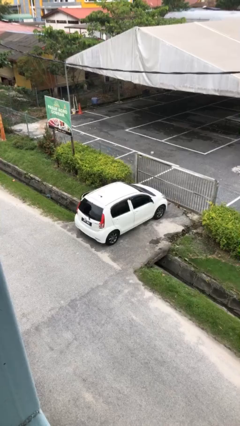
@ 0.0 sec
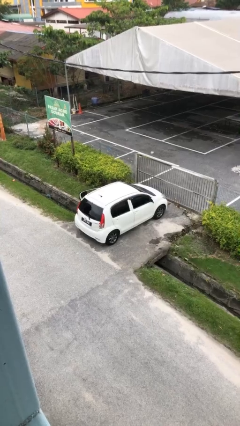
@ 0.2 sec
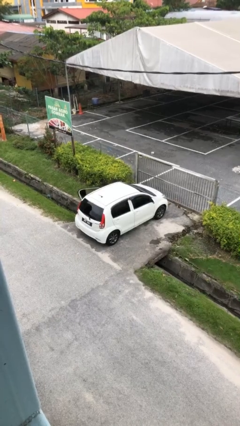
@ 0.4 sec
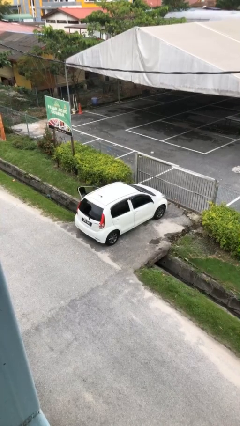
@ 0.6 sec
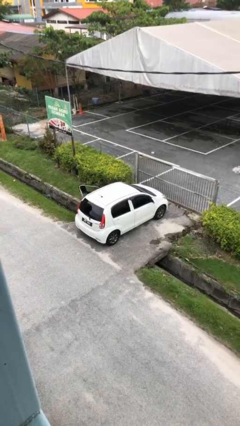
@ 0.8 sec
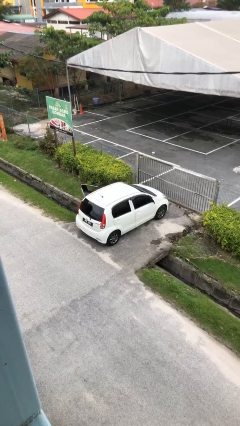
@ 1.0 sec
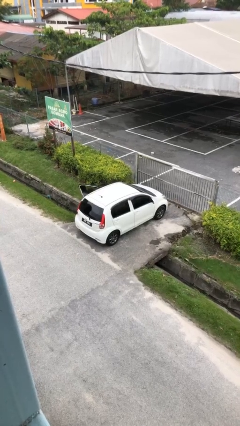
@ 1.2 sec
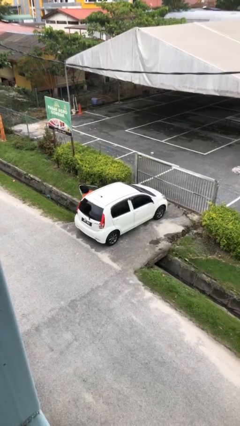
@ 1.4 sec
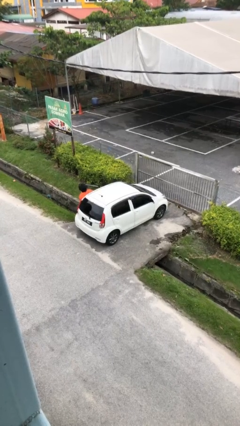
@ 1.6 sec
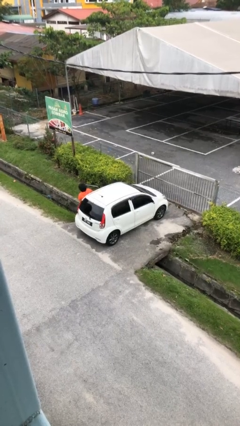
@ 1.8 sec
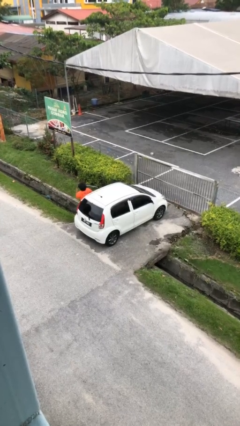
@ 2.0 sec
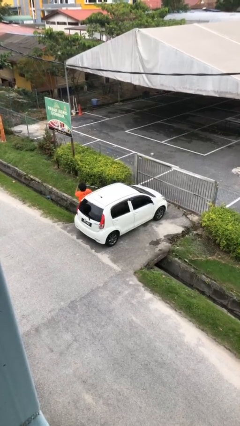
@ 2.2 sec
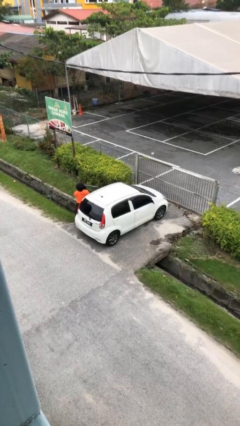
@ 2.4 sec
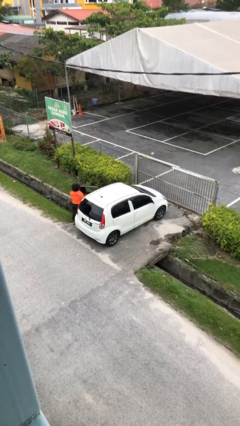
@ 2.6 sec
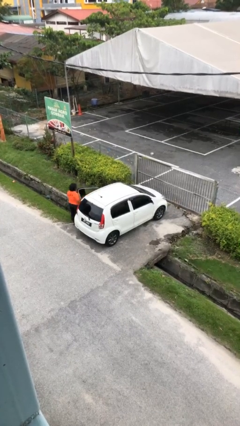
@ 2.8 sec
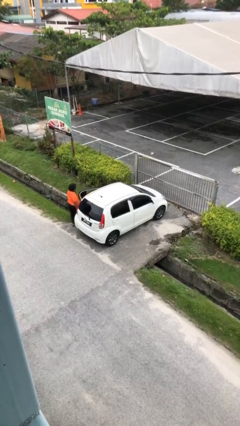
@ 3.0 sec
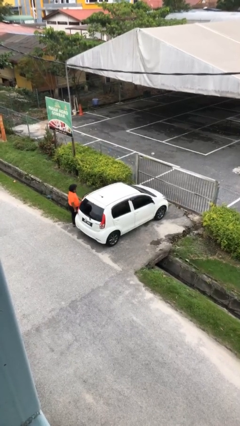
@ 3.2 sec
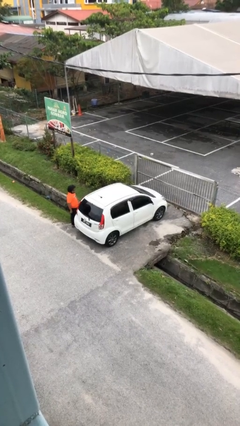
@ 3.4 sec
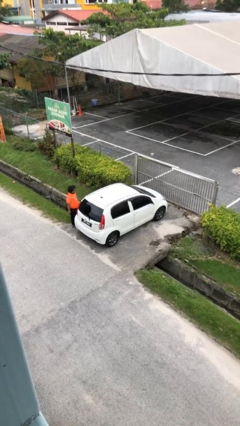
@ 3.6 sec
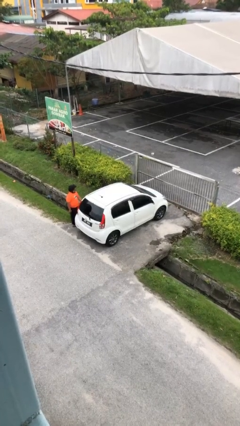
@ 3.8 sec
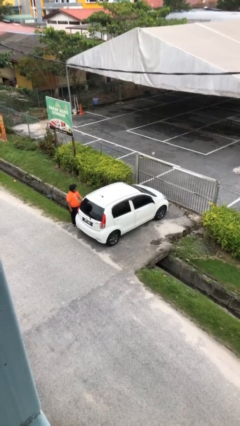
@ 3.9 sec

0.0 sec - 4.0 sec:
car drops off person

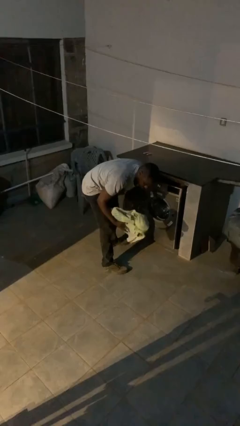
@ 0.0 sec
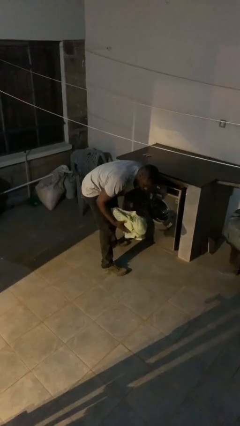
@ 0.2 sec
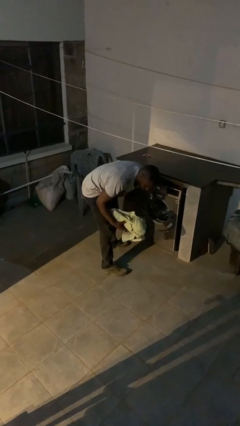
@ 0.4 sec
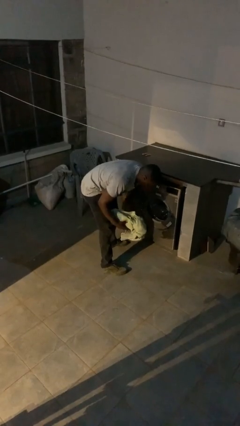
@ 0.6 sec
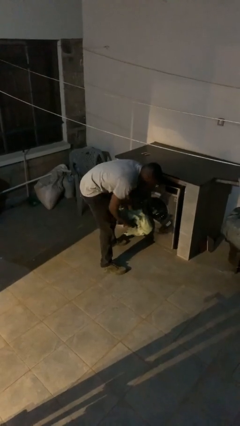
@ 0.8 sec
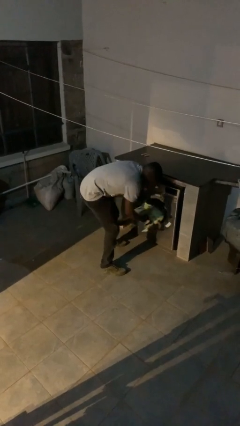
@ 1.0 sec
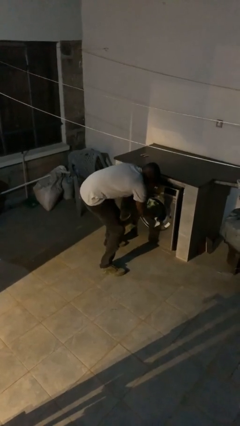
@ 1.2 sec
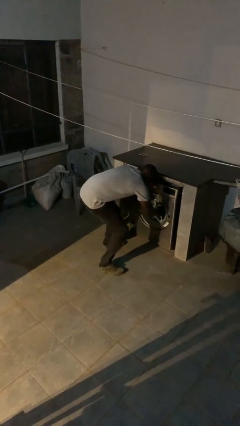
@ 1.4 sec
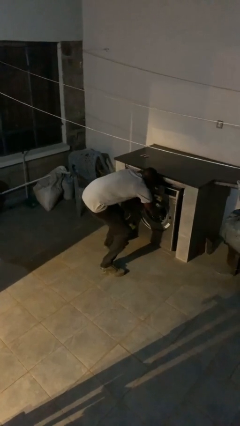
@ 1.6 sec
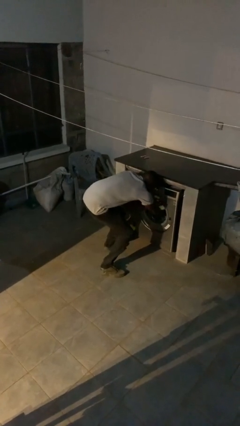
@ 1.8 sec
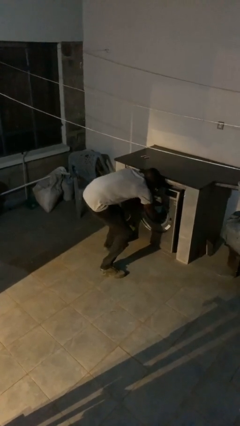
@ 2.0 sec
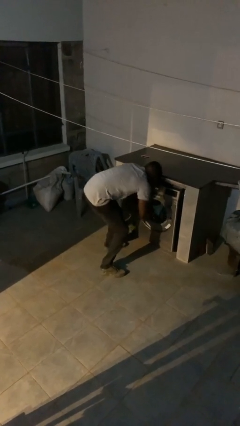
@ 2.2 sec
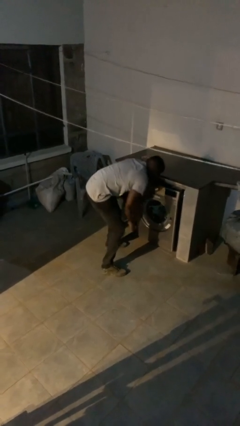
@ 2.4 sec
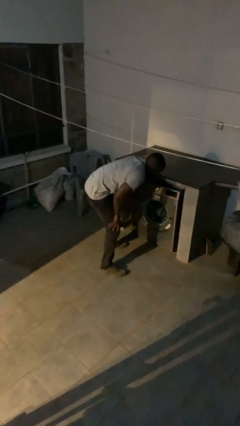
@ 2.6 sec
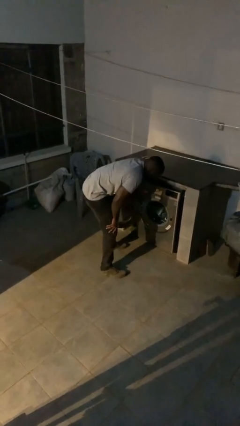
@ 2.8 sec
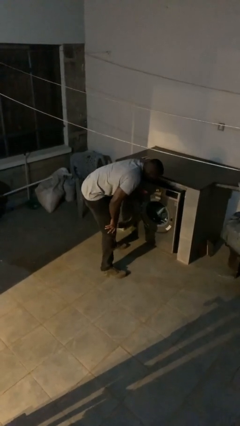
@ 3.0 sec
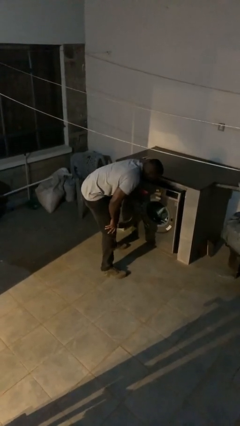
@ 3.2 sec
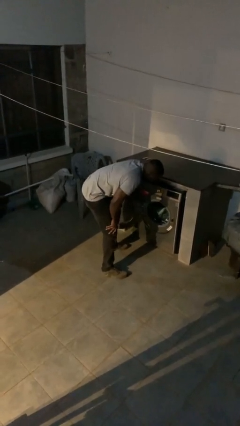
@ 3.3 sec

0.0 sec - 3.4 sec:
person loads clotheswasher

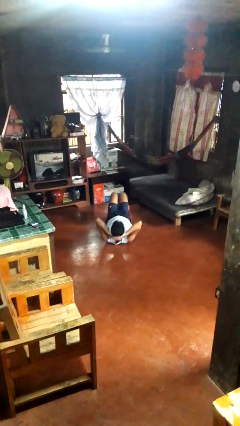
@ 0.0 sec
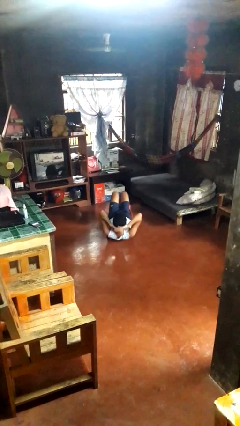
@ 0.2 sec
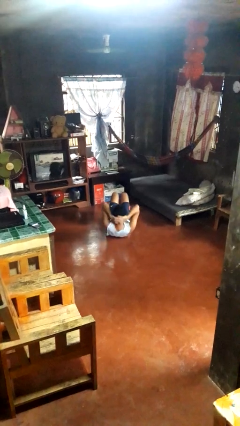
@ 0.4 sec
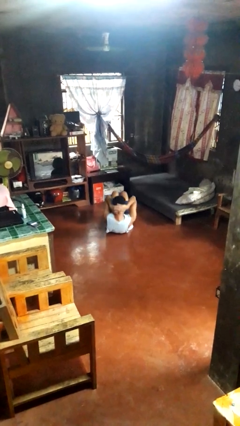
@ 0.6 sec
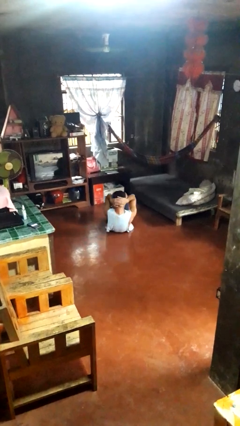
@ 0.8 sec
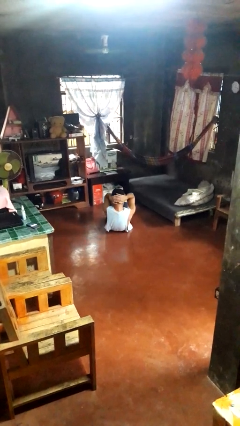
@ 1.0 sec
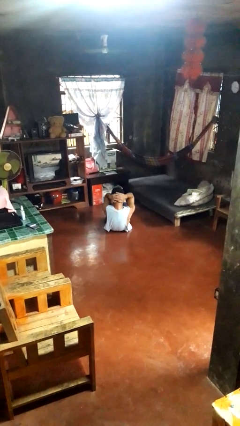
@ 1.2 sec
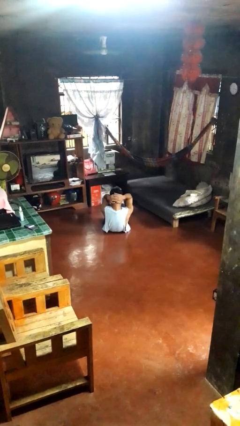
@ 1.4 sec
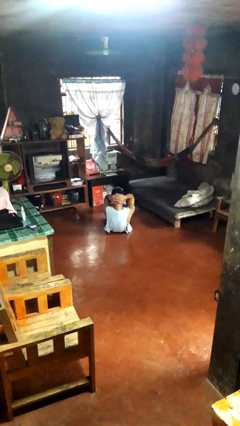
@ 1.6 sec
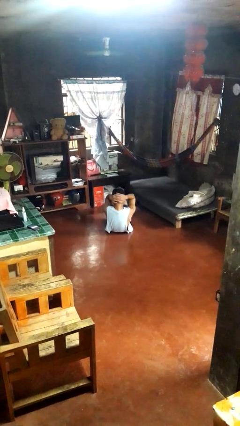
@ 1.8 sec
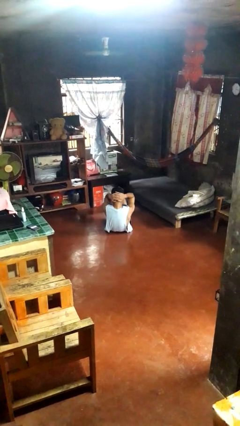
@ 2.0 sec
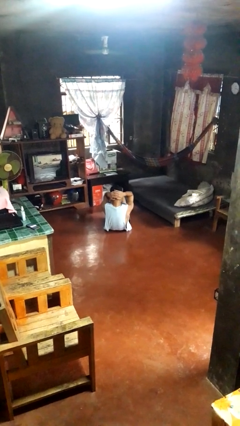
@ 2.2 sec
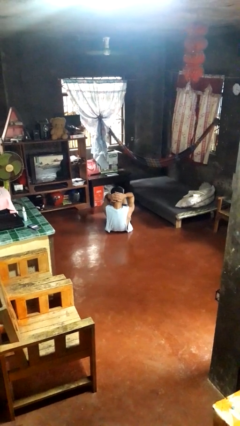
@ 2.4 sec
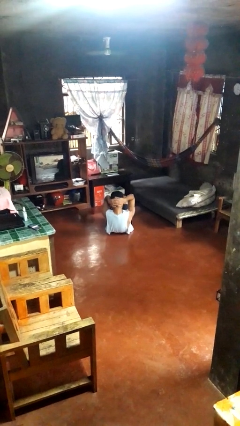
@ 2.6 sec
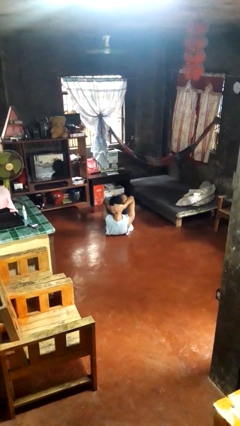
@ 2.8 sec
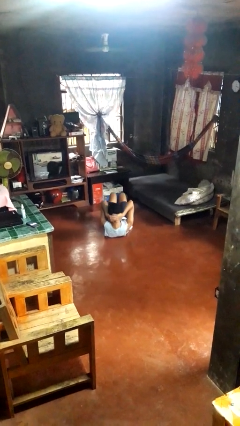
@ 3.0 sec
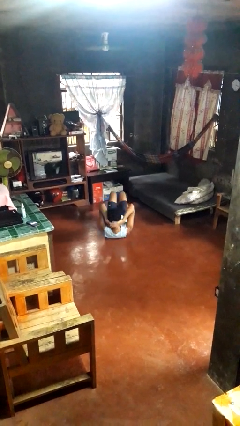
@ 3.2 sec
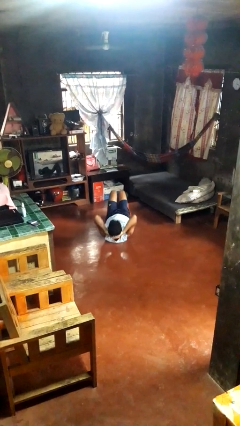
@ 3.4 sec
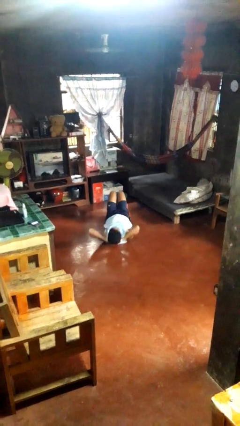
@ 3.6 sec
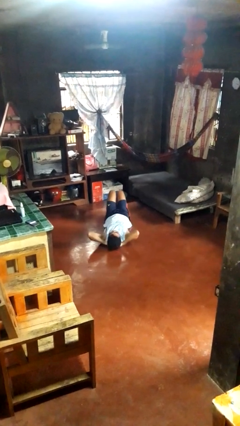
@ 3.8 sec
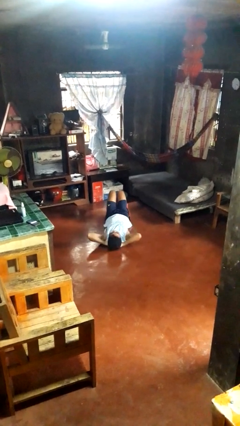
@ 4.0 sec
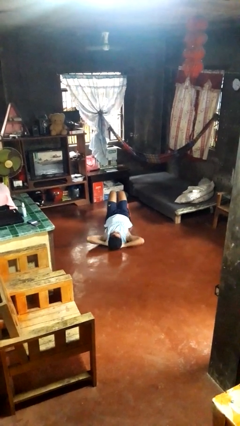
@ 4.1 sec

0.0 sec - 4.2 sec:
person exercises with situp

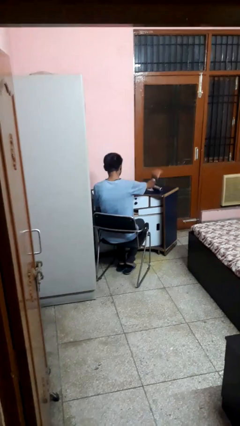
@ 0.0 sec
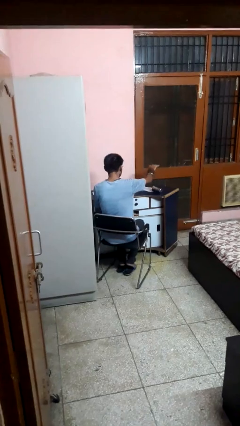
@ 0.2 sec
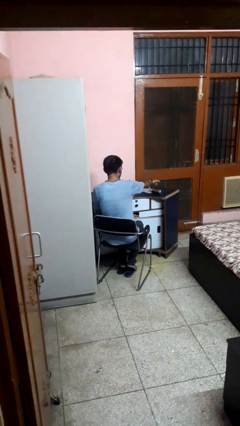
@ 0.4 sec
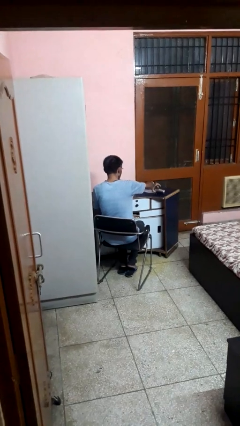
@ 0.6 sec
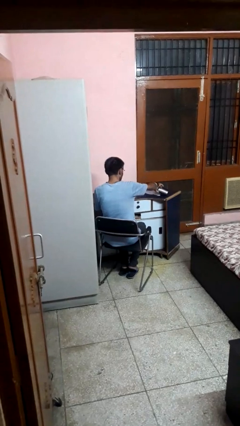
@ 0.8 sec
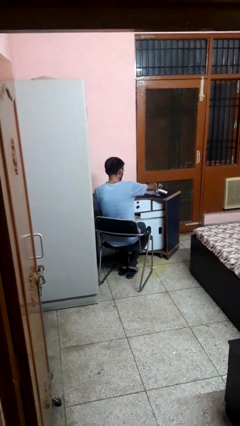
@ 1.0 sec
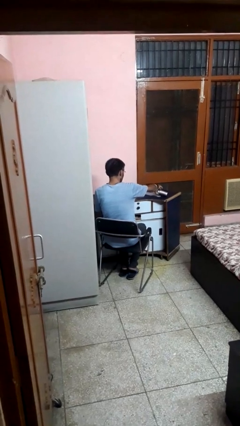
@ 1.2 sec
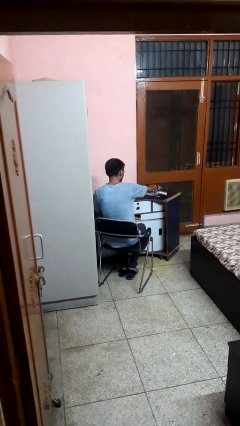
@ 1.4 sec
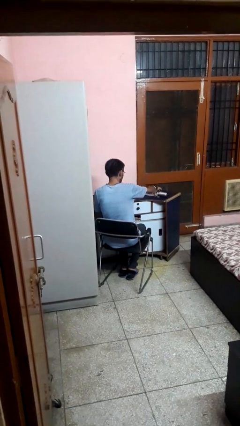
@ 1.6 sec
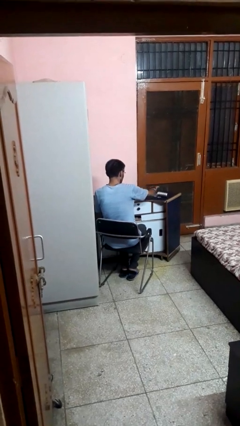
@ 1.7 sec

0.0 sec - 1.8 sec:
person spills on table

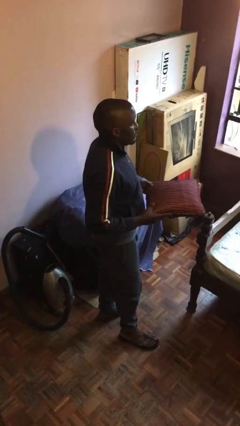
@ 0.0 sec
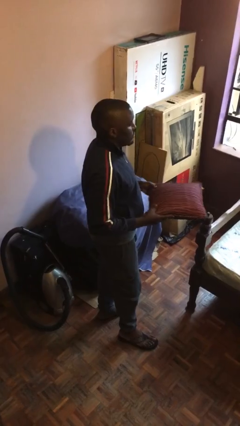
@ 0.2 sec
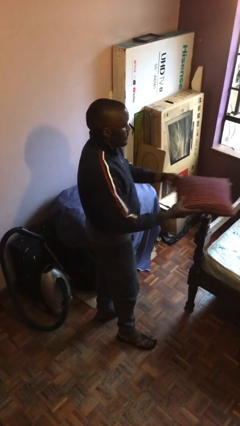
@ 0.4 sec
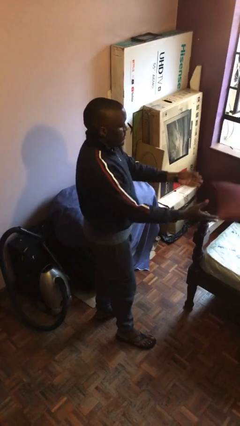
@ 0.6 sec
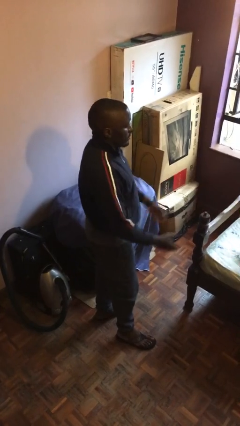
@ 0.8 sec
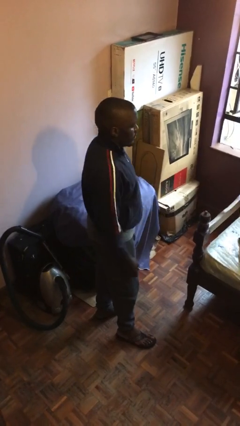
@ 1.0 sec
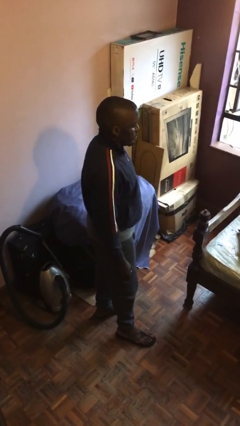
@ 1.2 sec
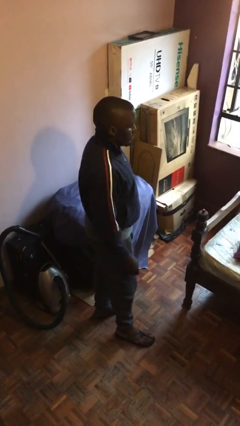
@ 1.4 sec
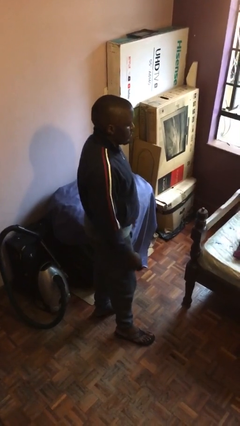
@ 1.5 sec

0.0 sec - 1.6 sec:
person throws object on bed

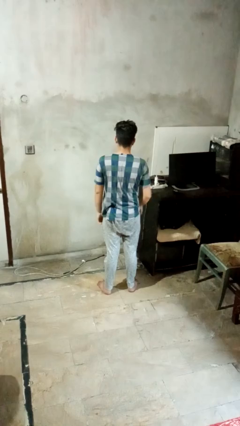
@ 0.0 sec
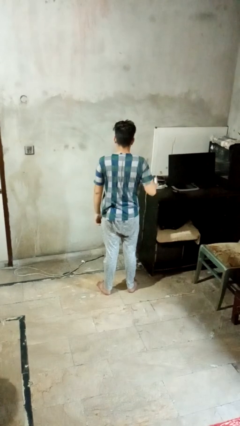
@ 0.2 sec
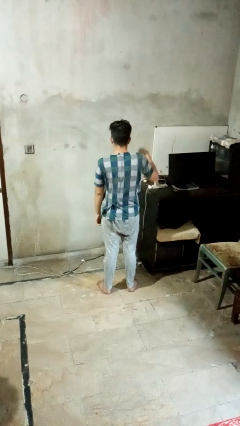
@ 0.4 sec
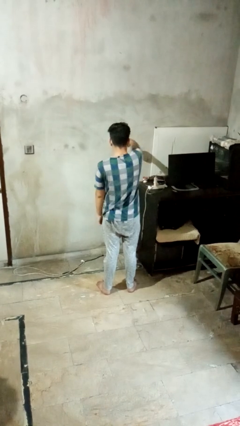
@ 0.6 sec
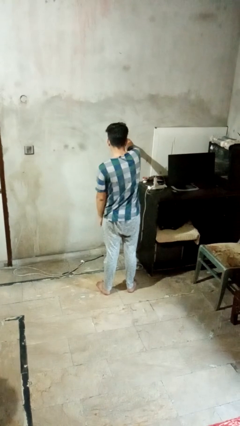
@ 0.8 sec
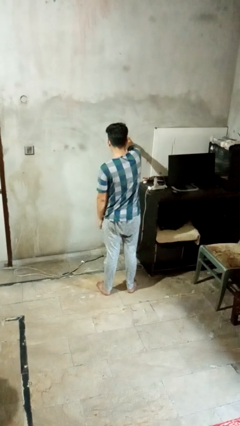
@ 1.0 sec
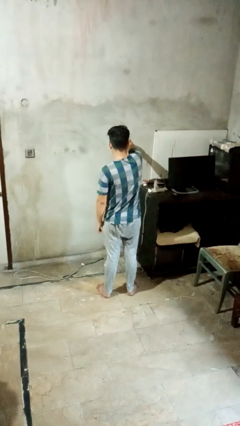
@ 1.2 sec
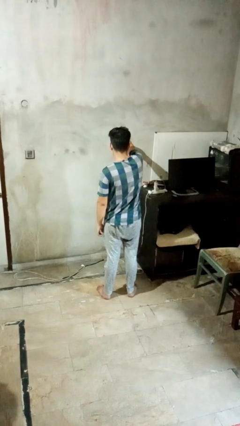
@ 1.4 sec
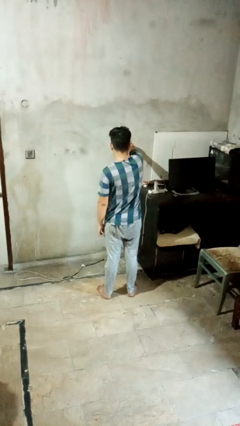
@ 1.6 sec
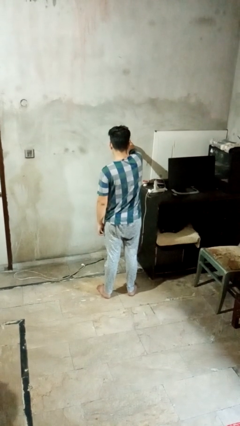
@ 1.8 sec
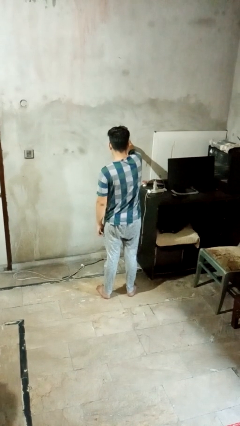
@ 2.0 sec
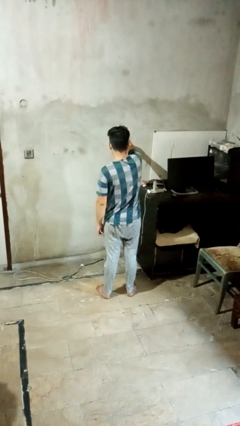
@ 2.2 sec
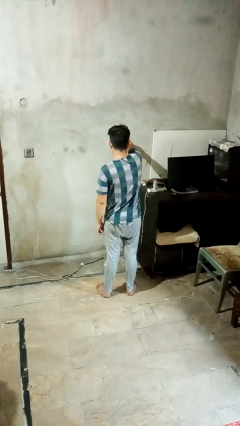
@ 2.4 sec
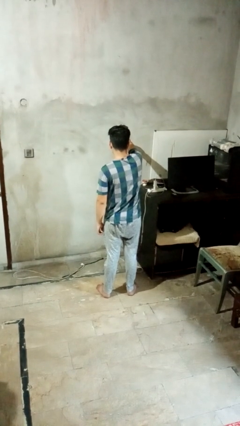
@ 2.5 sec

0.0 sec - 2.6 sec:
person punches
